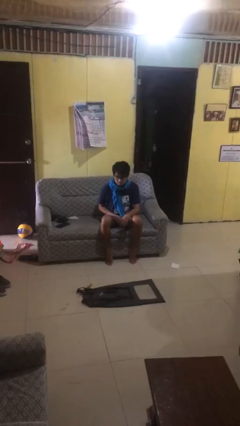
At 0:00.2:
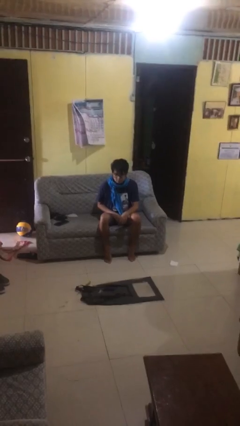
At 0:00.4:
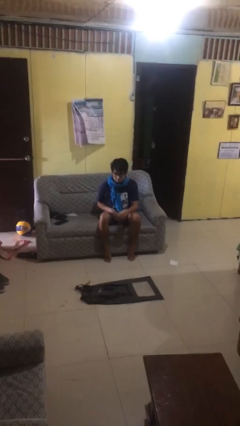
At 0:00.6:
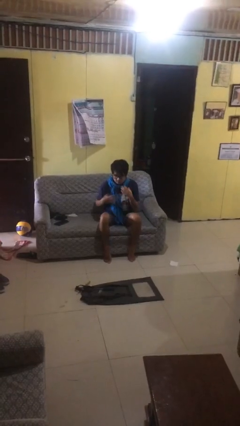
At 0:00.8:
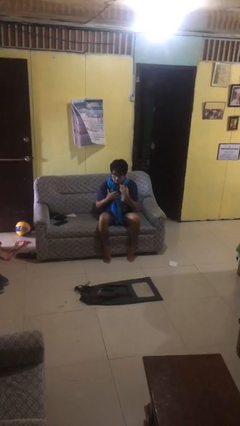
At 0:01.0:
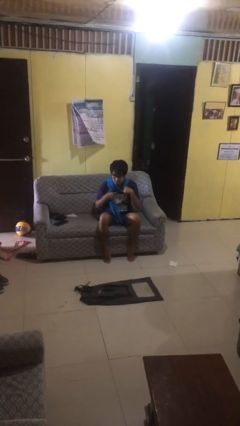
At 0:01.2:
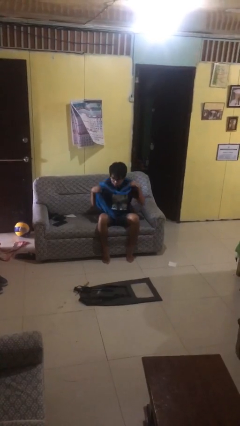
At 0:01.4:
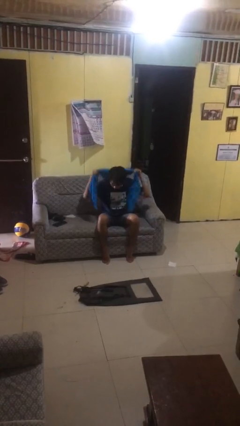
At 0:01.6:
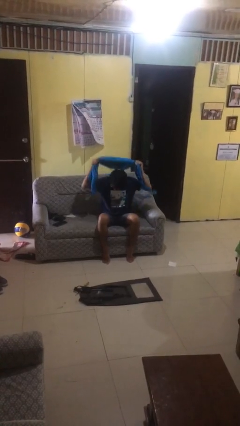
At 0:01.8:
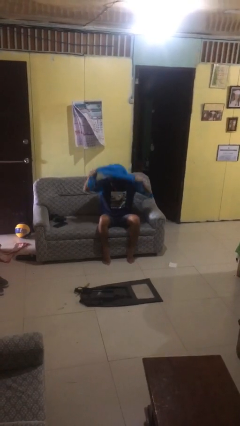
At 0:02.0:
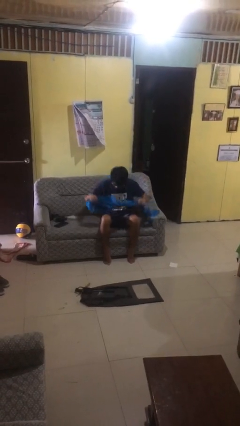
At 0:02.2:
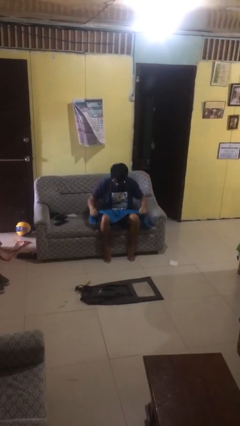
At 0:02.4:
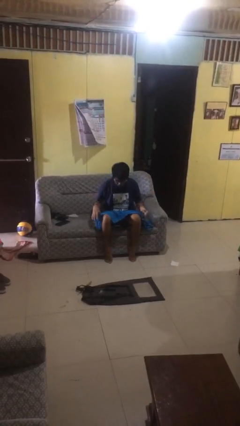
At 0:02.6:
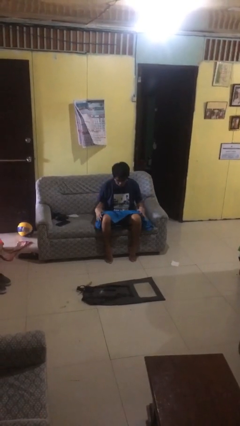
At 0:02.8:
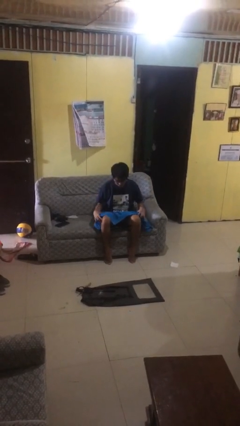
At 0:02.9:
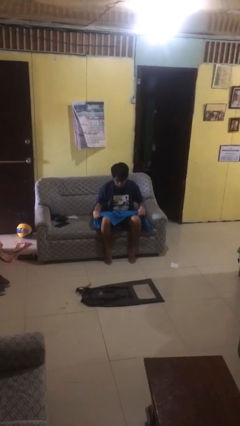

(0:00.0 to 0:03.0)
person takes off scarf

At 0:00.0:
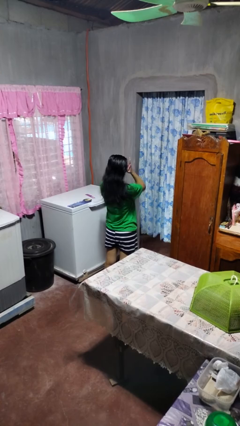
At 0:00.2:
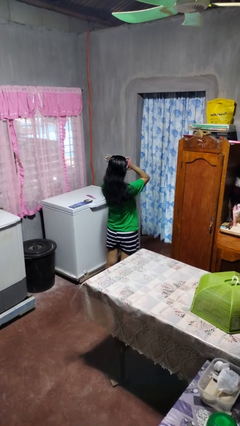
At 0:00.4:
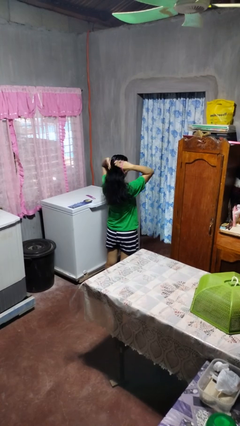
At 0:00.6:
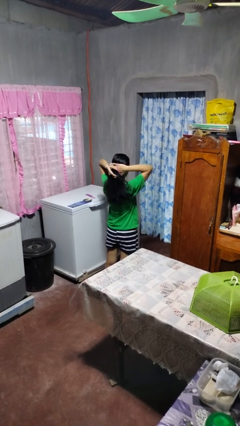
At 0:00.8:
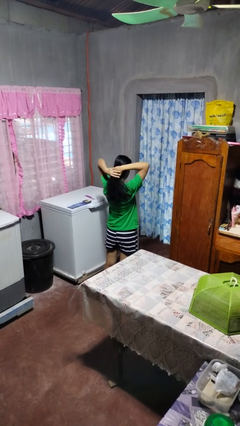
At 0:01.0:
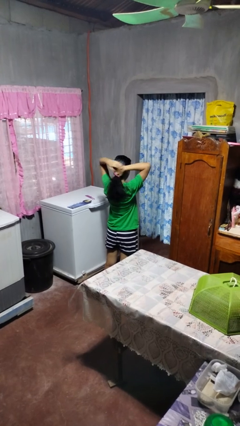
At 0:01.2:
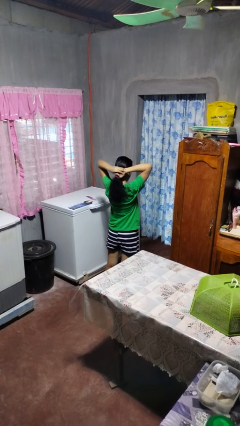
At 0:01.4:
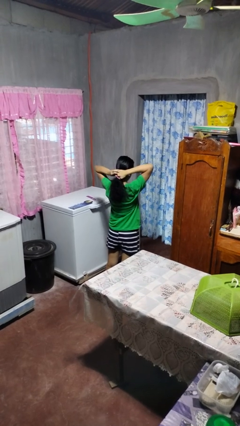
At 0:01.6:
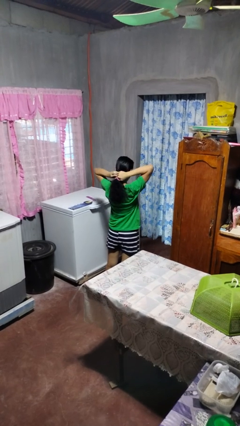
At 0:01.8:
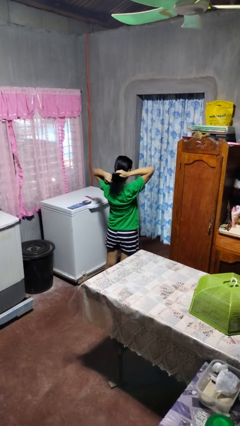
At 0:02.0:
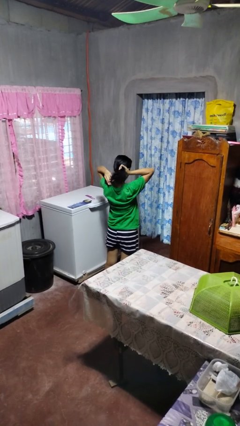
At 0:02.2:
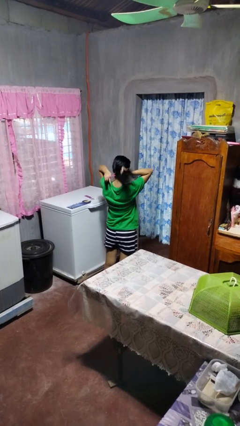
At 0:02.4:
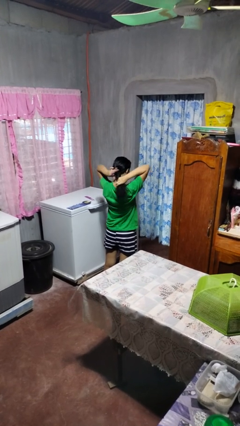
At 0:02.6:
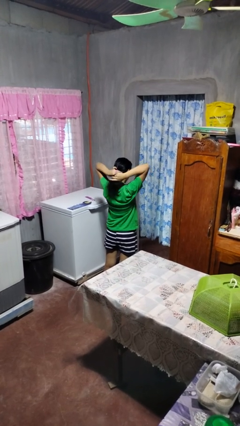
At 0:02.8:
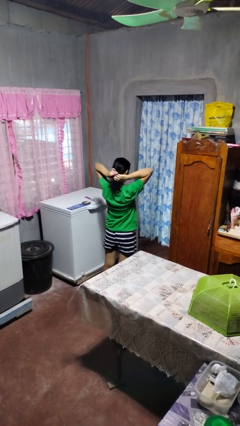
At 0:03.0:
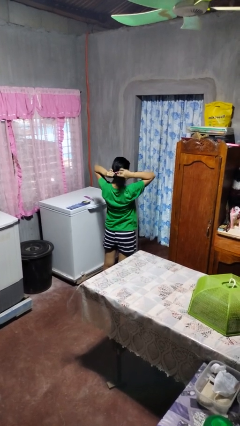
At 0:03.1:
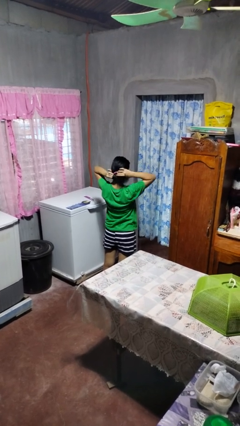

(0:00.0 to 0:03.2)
person puts hair in ponytail

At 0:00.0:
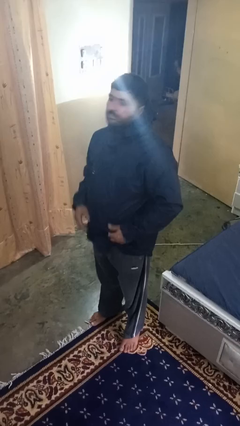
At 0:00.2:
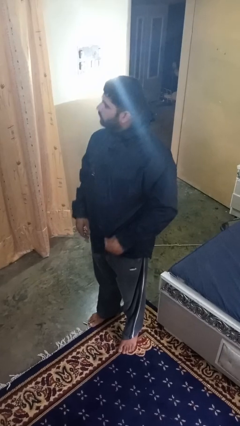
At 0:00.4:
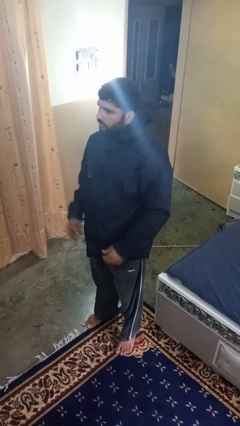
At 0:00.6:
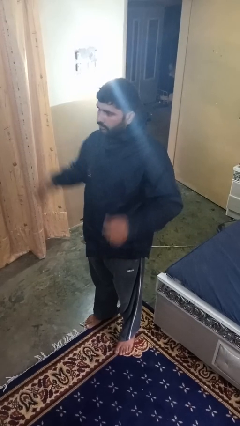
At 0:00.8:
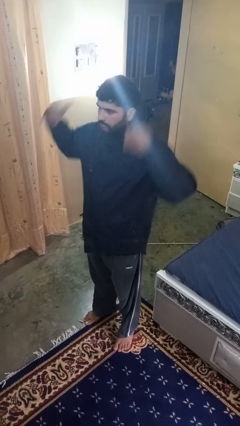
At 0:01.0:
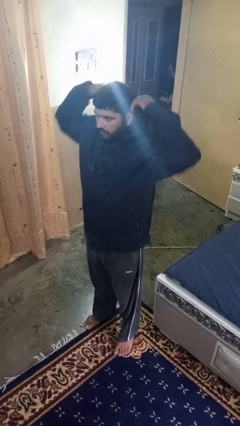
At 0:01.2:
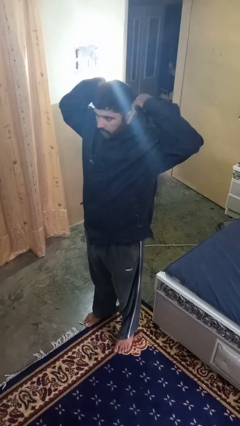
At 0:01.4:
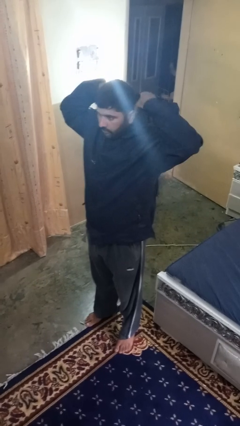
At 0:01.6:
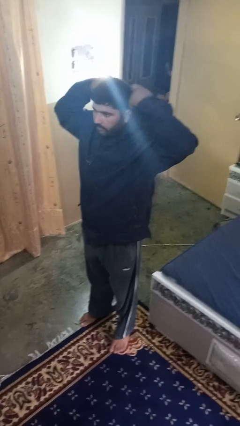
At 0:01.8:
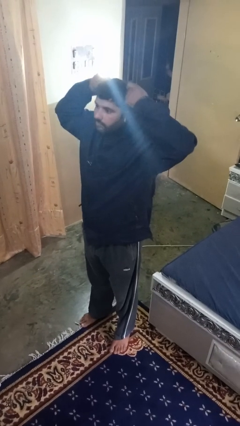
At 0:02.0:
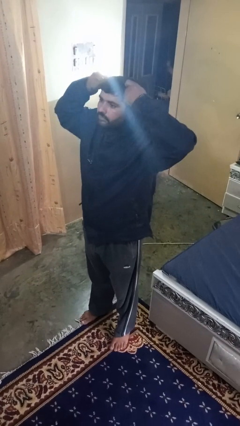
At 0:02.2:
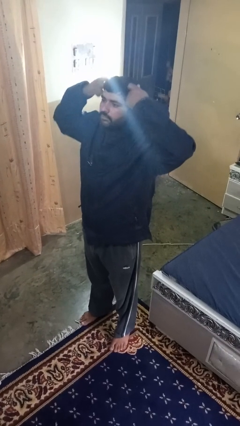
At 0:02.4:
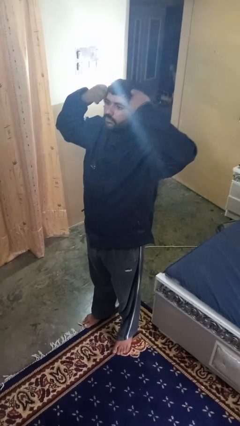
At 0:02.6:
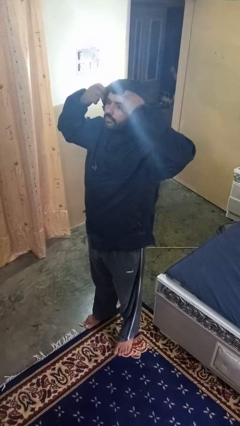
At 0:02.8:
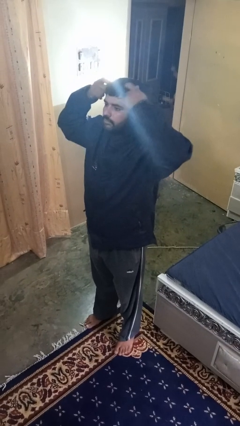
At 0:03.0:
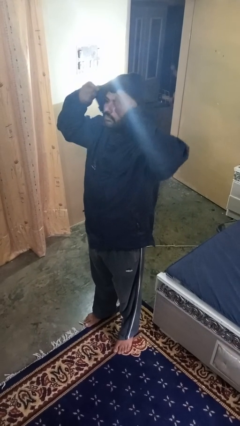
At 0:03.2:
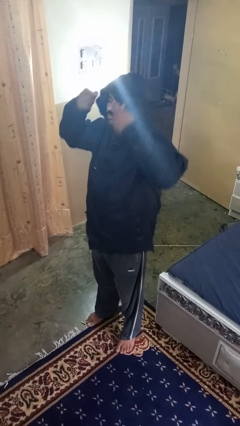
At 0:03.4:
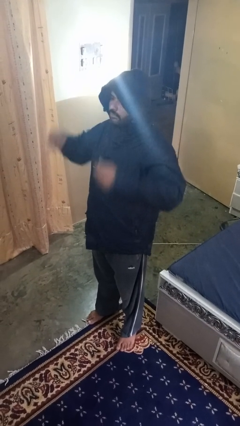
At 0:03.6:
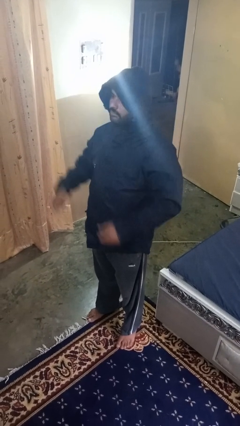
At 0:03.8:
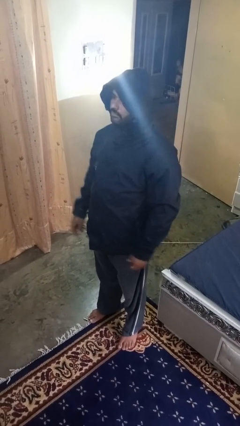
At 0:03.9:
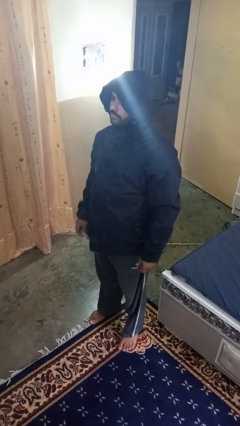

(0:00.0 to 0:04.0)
person puts on hoodie

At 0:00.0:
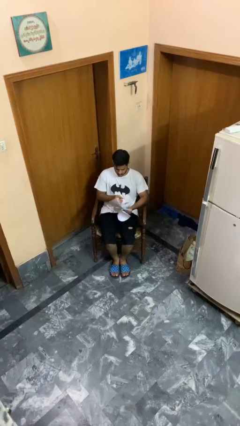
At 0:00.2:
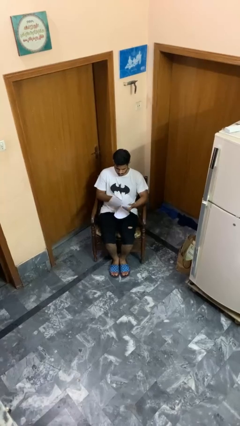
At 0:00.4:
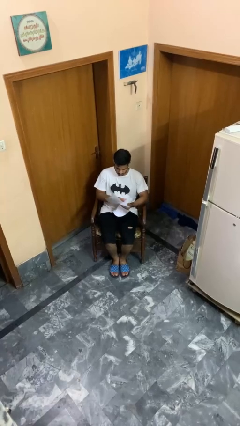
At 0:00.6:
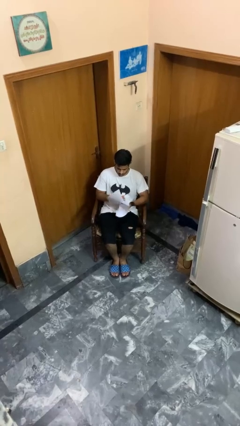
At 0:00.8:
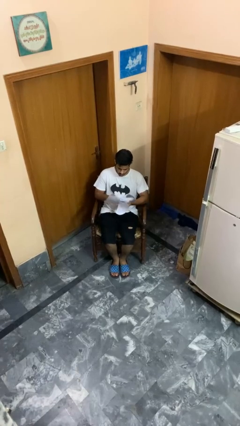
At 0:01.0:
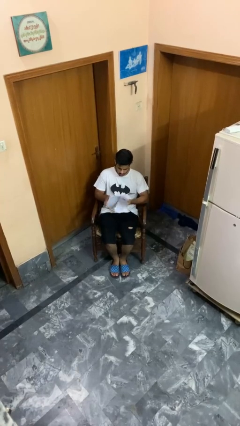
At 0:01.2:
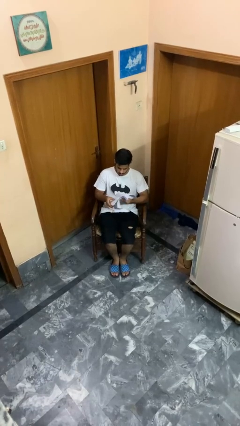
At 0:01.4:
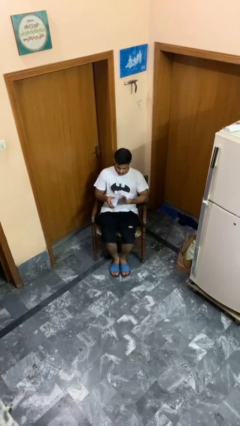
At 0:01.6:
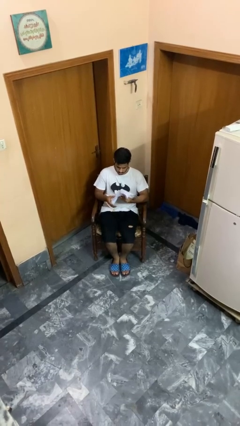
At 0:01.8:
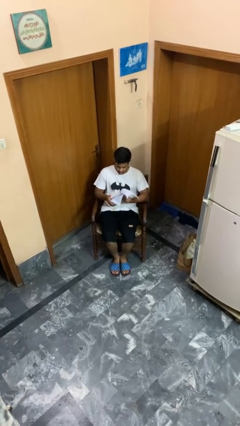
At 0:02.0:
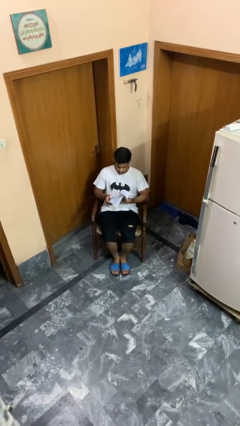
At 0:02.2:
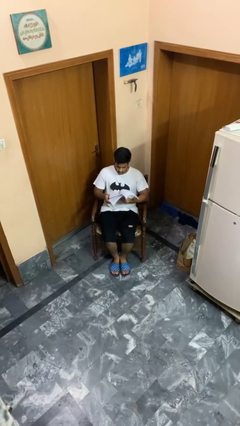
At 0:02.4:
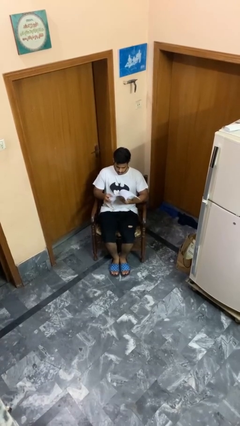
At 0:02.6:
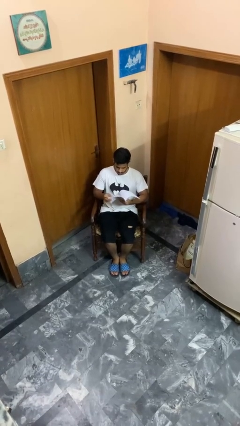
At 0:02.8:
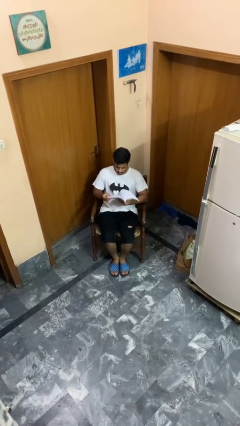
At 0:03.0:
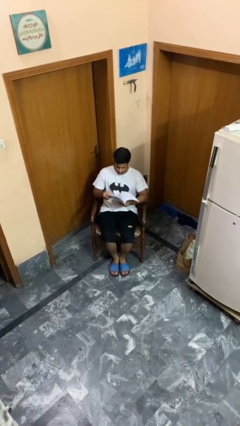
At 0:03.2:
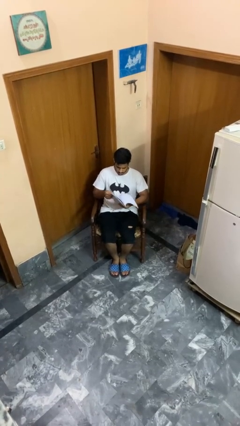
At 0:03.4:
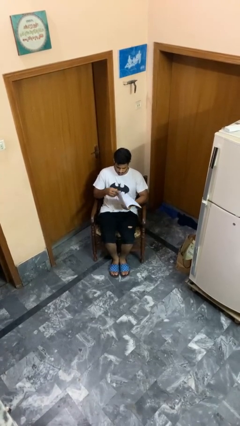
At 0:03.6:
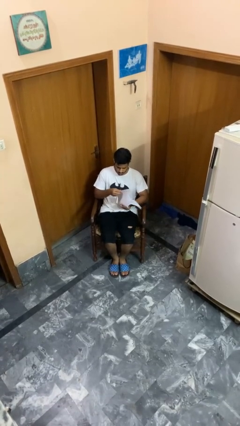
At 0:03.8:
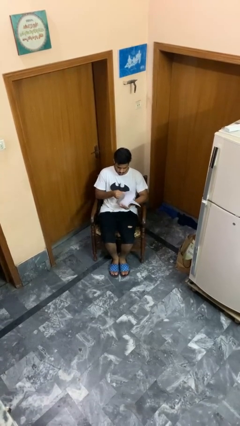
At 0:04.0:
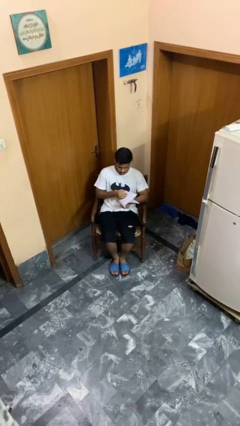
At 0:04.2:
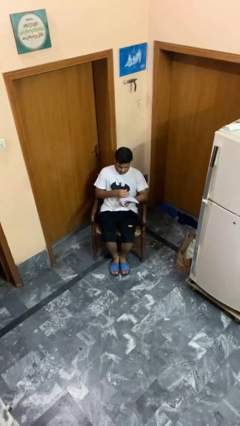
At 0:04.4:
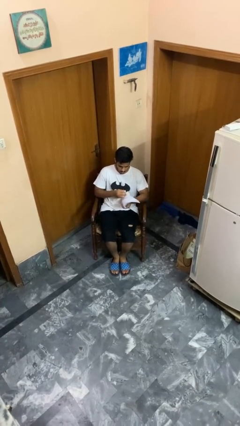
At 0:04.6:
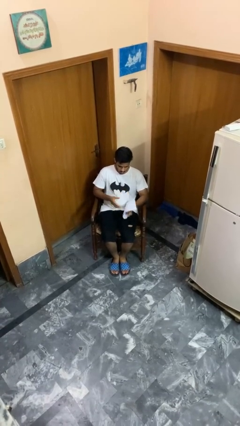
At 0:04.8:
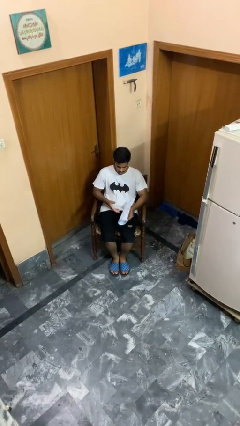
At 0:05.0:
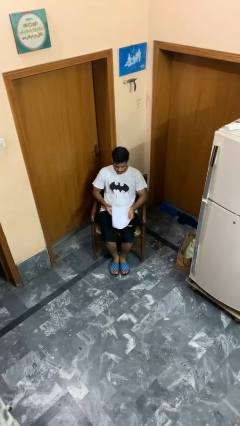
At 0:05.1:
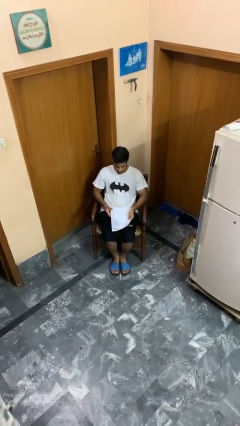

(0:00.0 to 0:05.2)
person reads magazine

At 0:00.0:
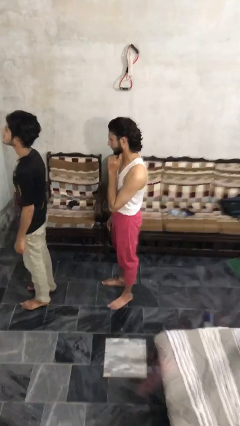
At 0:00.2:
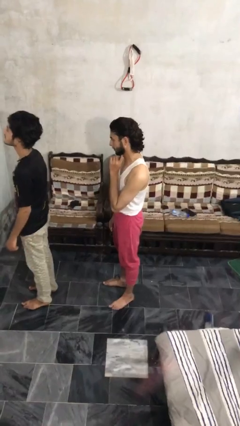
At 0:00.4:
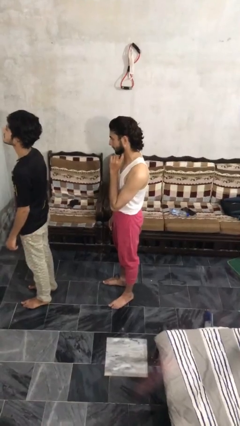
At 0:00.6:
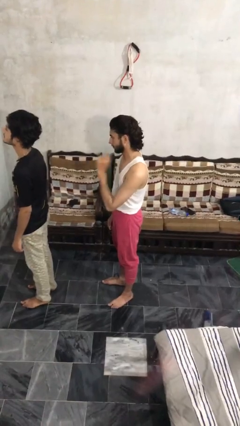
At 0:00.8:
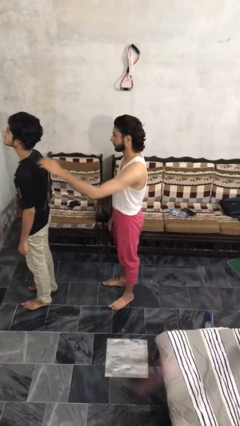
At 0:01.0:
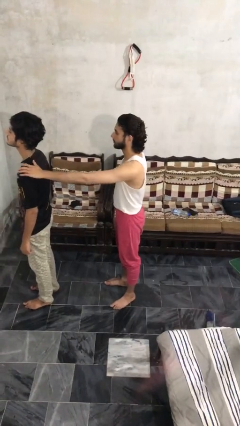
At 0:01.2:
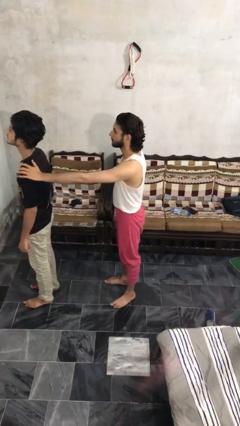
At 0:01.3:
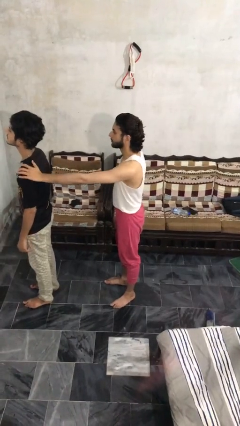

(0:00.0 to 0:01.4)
person grabs person by shoulder

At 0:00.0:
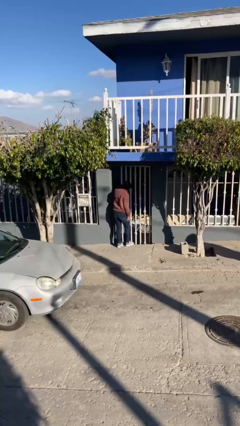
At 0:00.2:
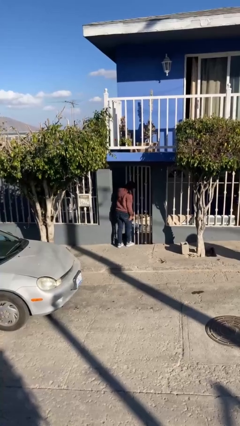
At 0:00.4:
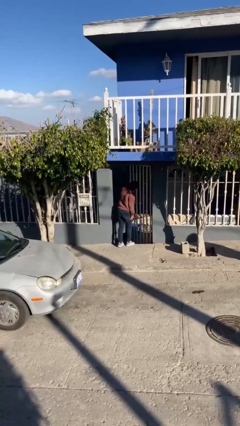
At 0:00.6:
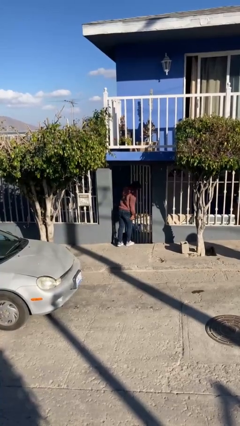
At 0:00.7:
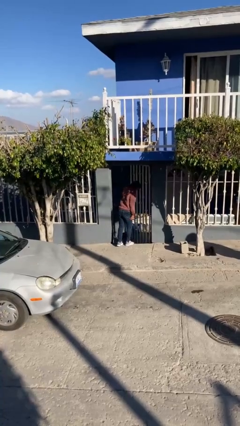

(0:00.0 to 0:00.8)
person opens facility door
